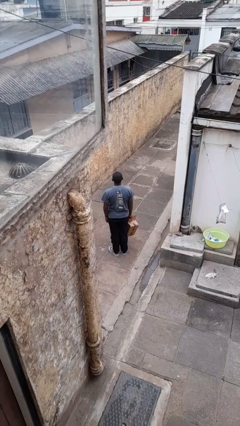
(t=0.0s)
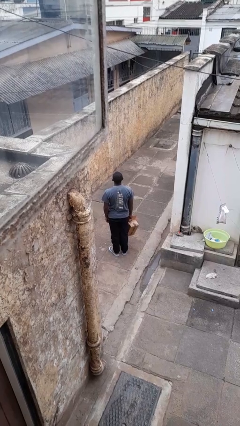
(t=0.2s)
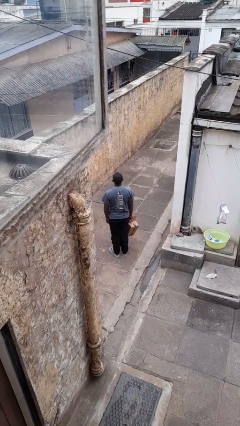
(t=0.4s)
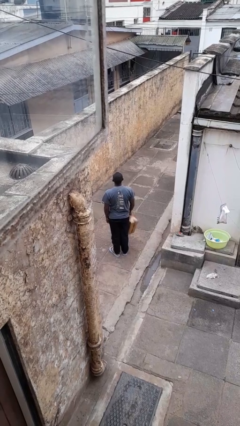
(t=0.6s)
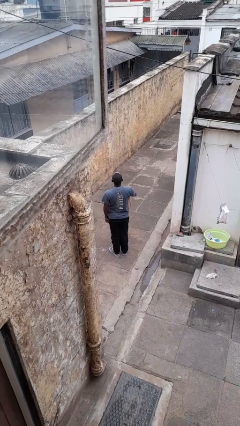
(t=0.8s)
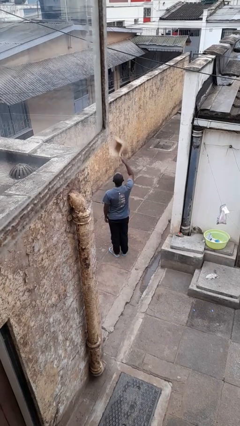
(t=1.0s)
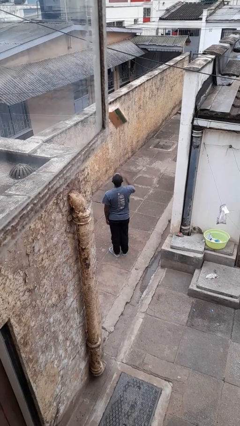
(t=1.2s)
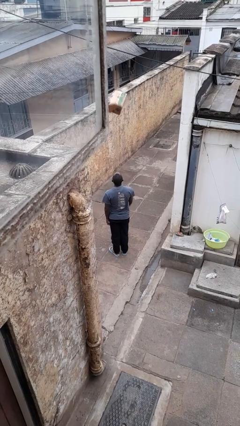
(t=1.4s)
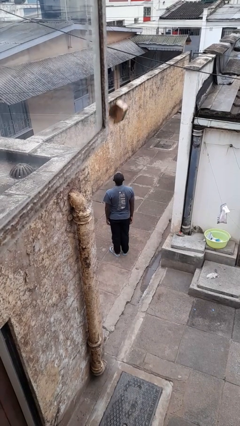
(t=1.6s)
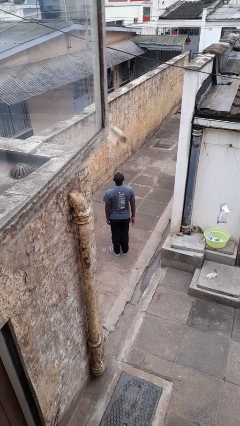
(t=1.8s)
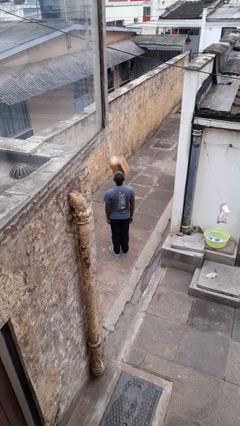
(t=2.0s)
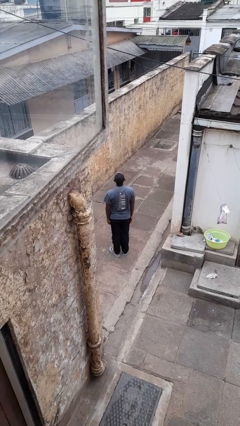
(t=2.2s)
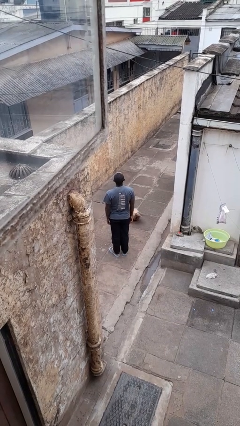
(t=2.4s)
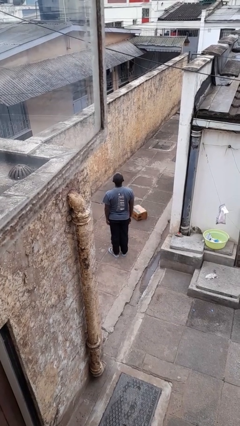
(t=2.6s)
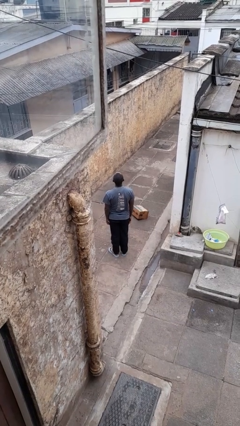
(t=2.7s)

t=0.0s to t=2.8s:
person throws object into air

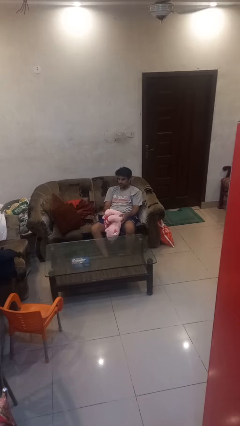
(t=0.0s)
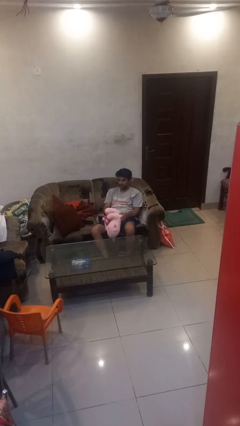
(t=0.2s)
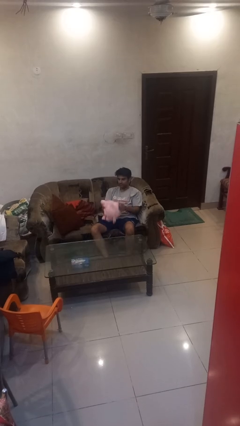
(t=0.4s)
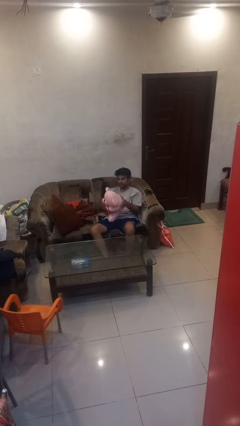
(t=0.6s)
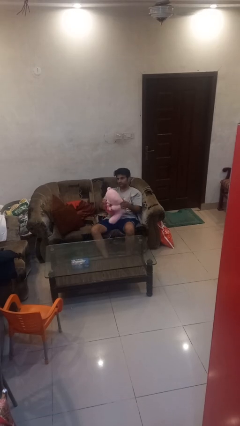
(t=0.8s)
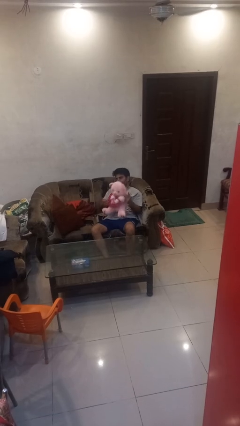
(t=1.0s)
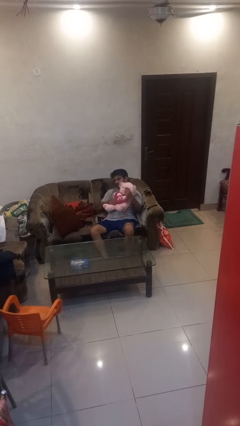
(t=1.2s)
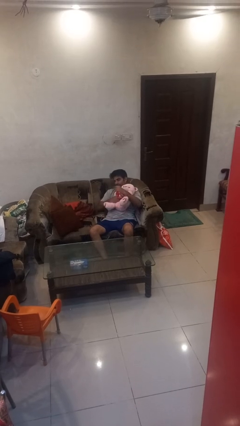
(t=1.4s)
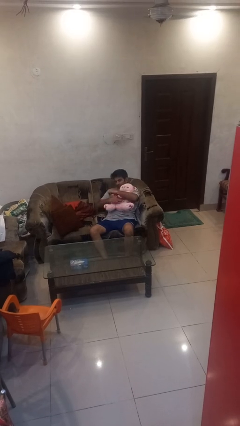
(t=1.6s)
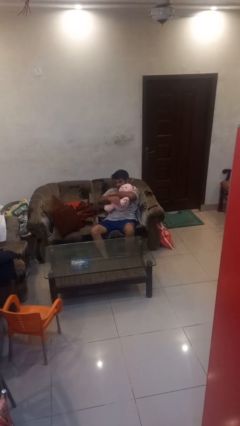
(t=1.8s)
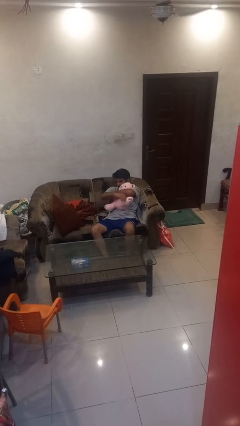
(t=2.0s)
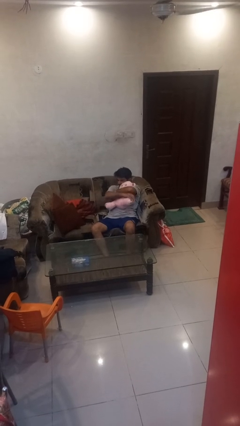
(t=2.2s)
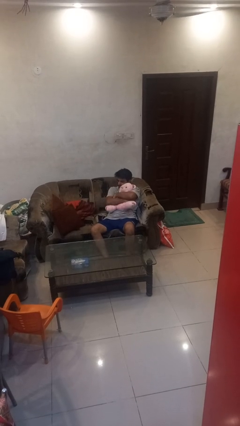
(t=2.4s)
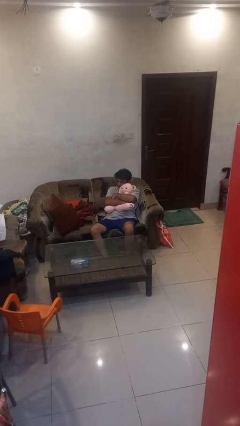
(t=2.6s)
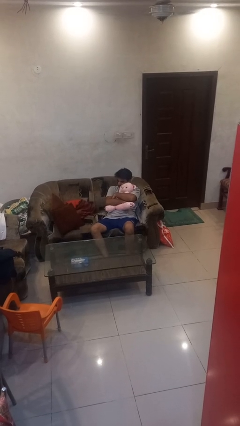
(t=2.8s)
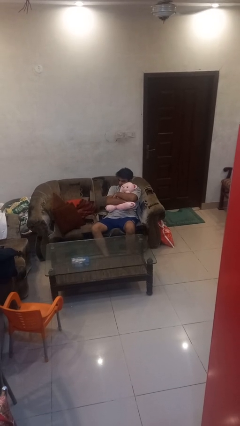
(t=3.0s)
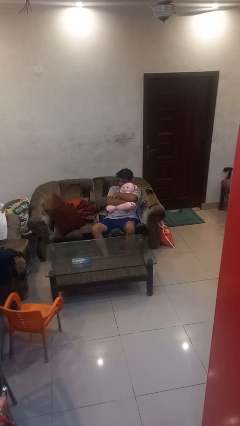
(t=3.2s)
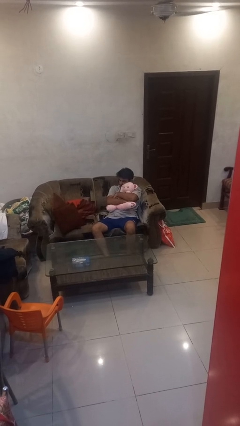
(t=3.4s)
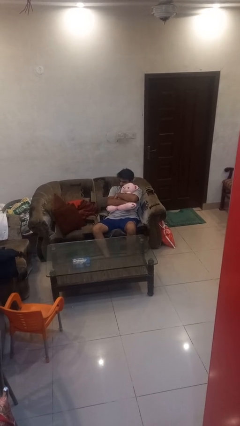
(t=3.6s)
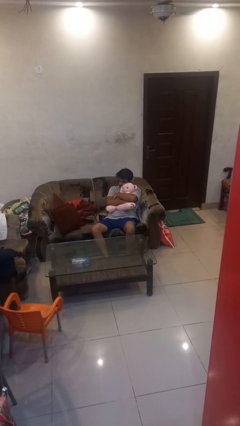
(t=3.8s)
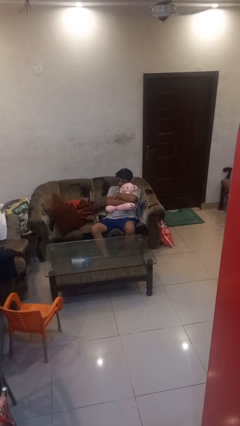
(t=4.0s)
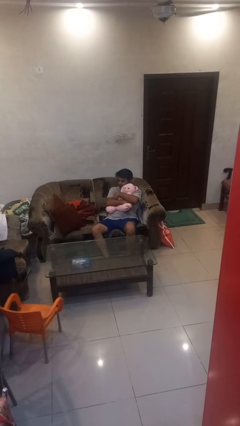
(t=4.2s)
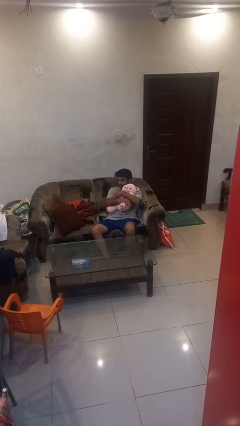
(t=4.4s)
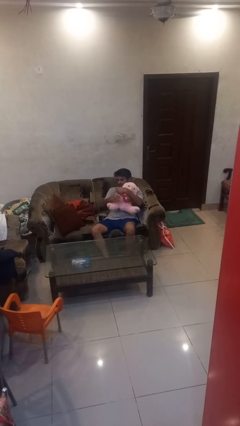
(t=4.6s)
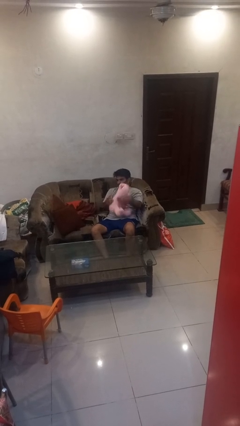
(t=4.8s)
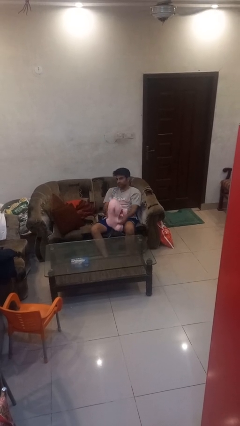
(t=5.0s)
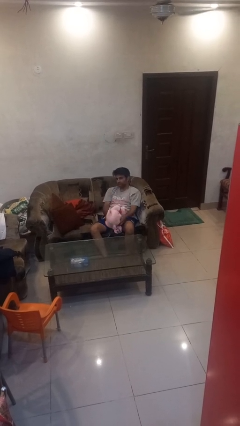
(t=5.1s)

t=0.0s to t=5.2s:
person hugs stuffed animal

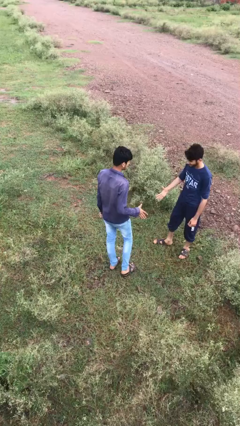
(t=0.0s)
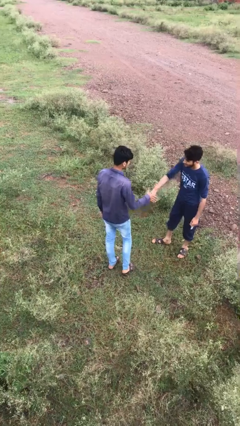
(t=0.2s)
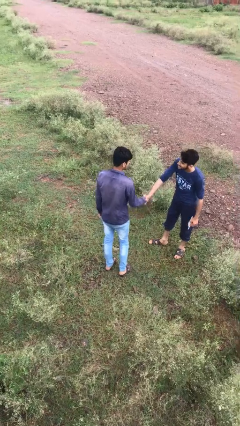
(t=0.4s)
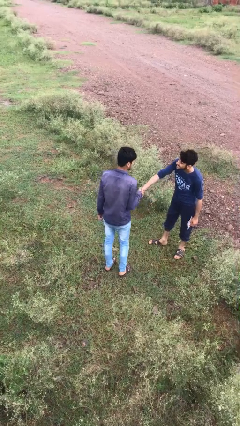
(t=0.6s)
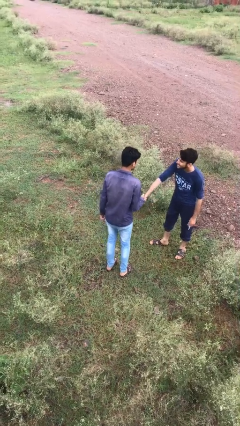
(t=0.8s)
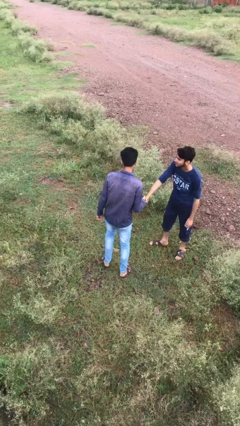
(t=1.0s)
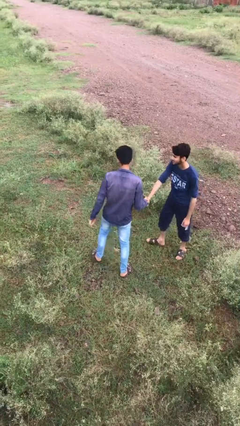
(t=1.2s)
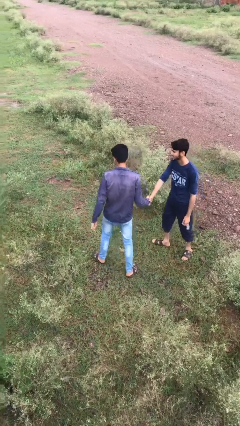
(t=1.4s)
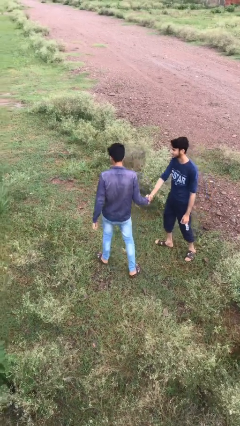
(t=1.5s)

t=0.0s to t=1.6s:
person shakes hand

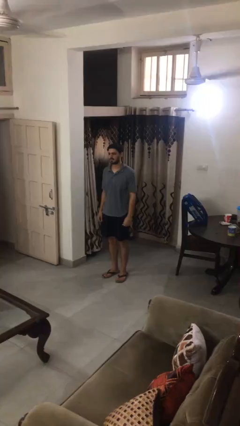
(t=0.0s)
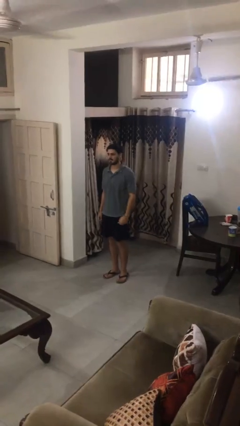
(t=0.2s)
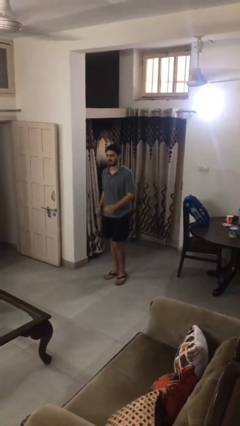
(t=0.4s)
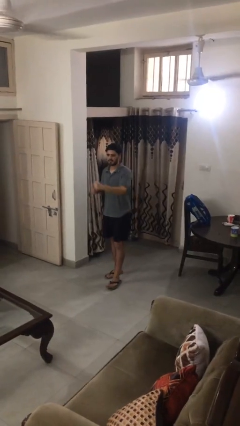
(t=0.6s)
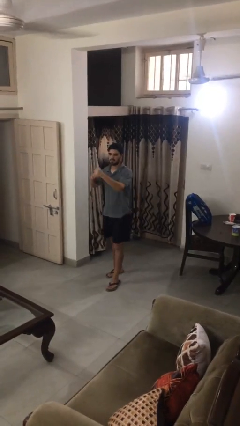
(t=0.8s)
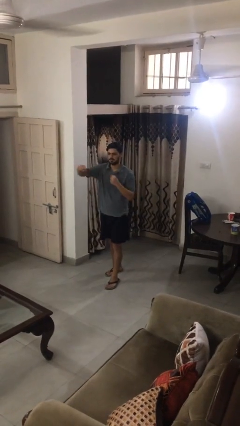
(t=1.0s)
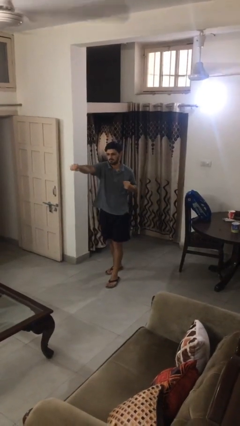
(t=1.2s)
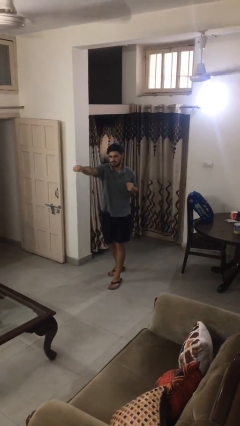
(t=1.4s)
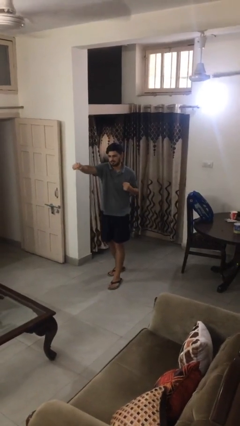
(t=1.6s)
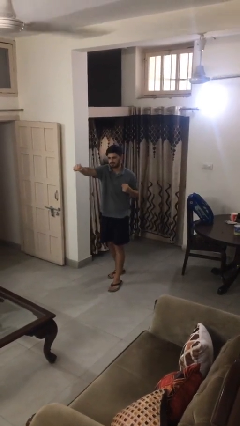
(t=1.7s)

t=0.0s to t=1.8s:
person punches

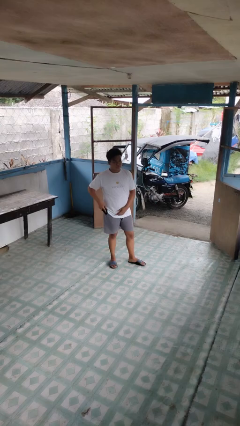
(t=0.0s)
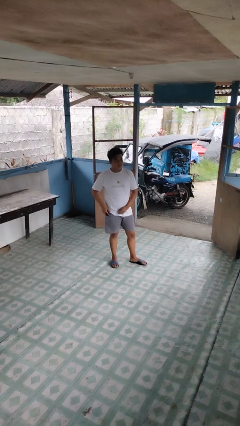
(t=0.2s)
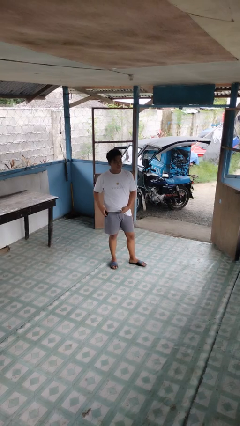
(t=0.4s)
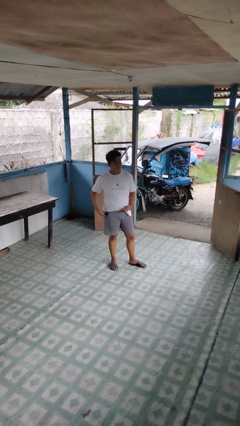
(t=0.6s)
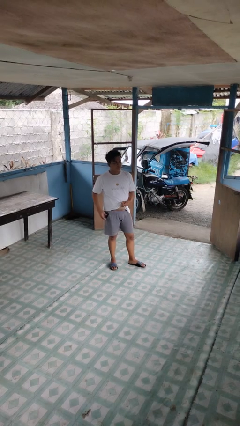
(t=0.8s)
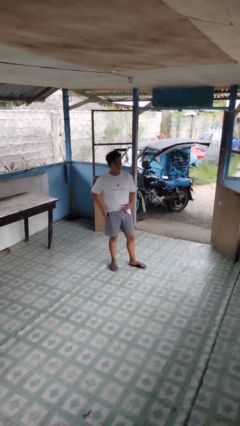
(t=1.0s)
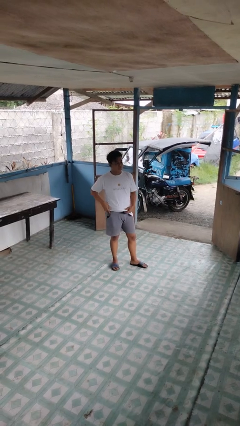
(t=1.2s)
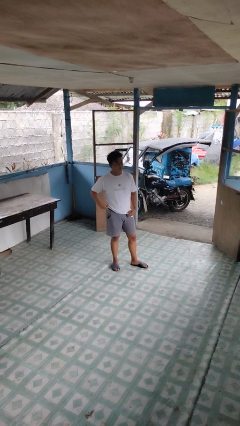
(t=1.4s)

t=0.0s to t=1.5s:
person puts phone into pocket

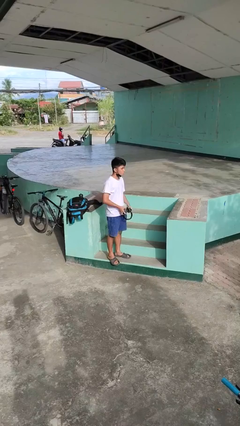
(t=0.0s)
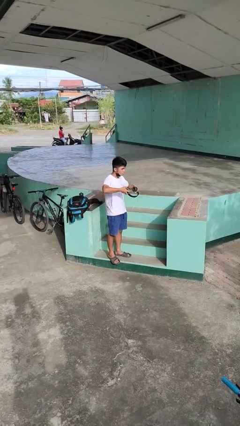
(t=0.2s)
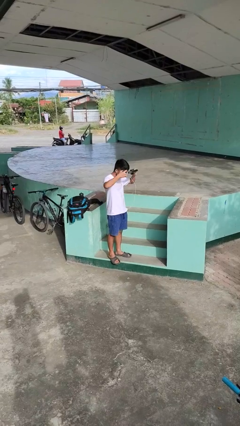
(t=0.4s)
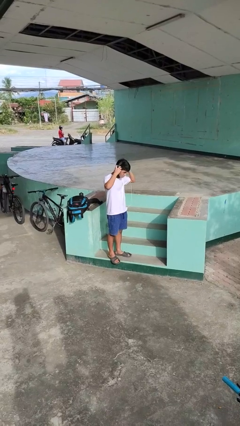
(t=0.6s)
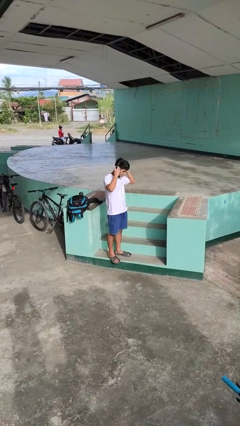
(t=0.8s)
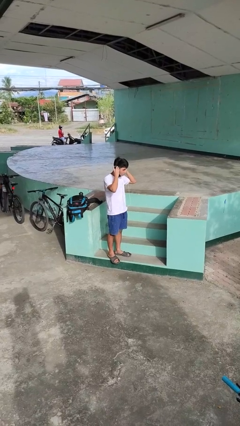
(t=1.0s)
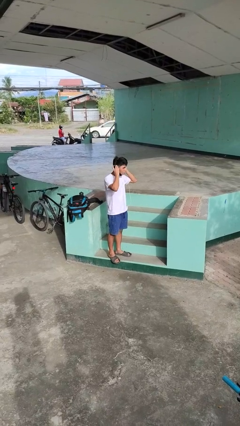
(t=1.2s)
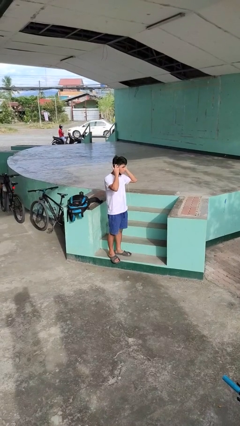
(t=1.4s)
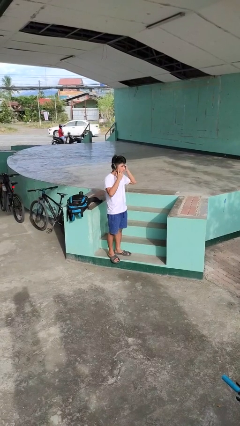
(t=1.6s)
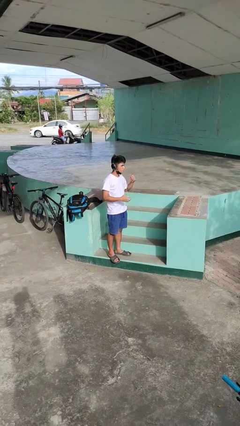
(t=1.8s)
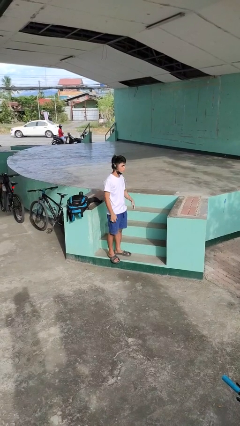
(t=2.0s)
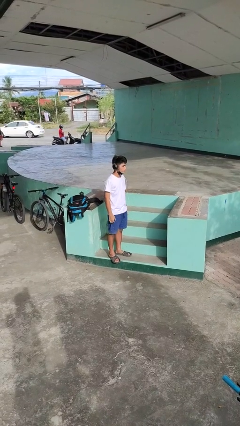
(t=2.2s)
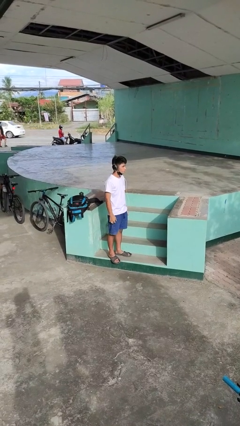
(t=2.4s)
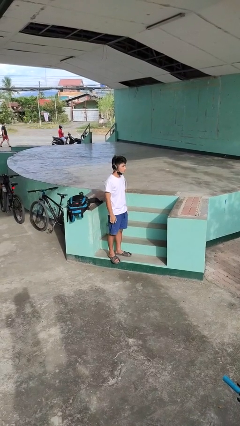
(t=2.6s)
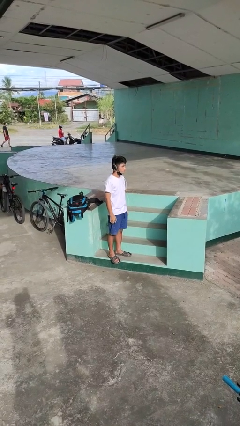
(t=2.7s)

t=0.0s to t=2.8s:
person puts on headphones

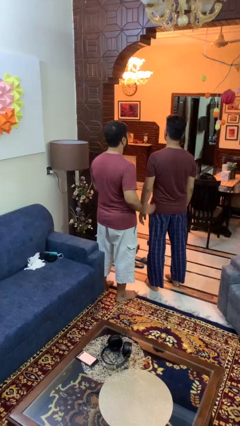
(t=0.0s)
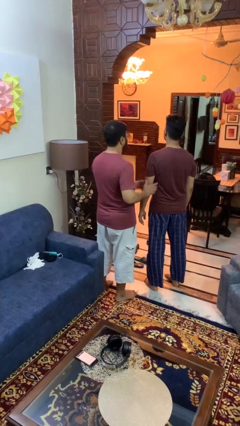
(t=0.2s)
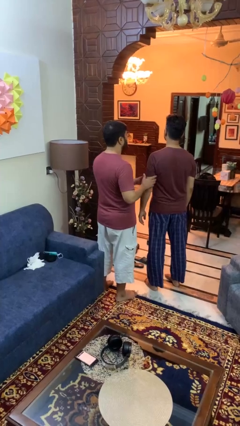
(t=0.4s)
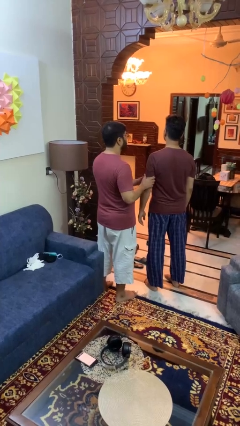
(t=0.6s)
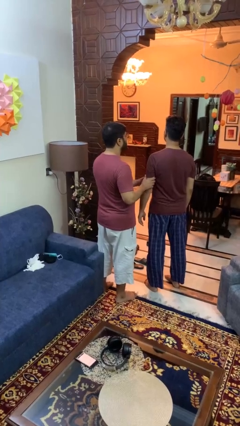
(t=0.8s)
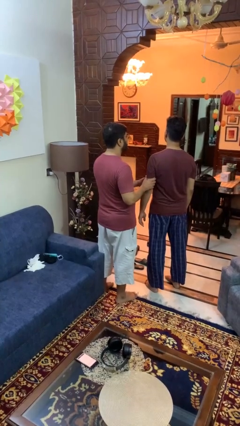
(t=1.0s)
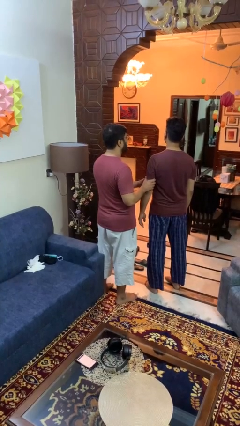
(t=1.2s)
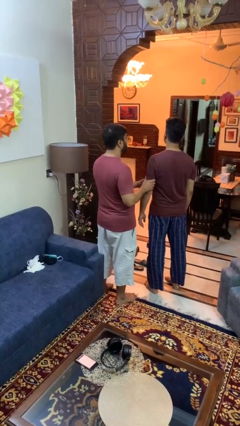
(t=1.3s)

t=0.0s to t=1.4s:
person grabs person by bicep
